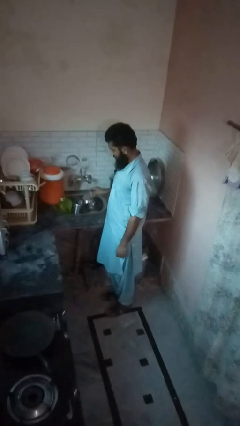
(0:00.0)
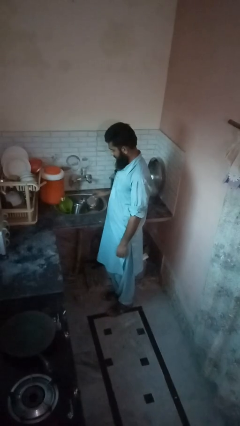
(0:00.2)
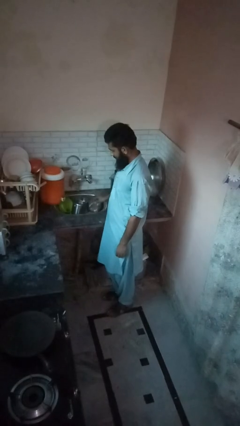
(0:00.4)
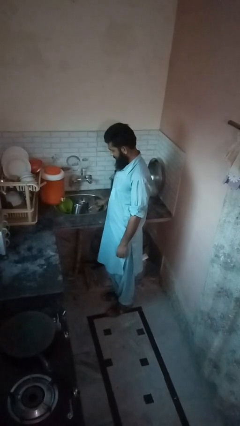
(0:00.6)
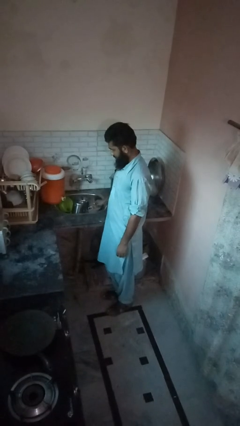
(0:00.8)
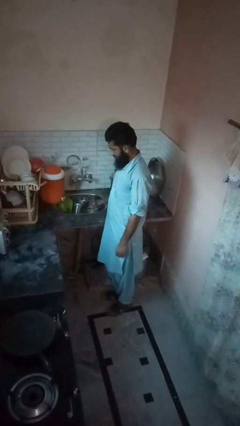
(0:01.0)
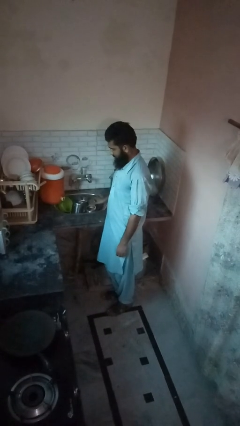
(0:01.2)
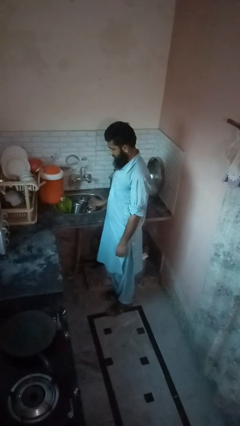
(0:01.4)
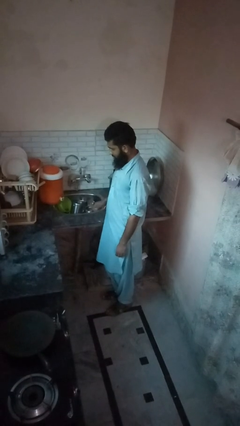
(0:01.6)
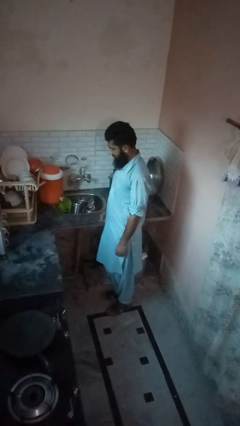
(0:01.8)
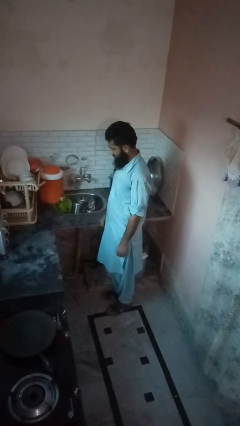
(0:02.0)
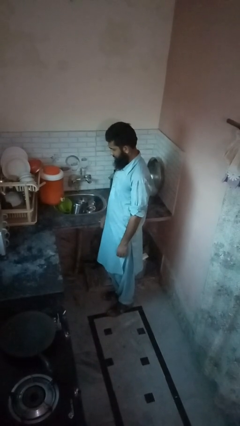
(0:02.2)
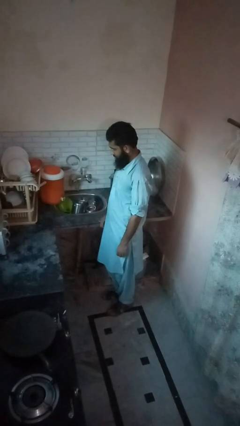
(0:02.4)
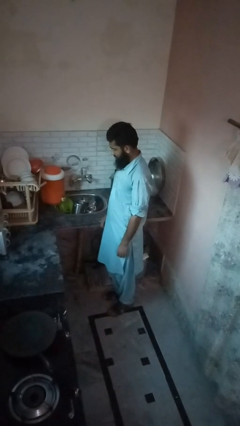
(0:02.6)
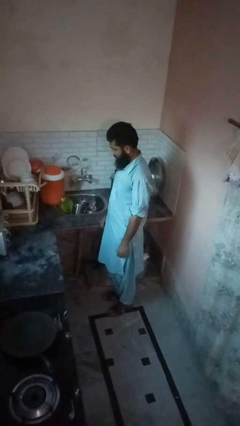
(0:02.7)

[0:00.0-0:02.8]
person puts down object on countertop

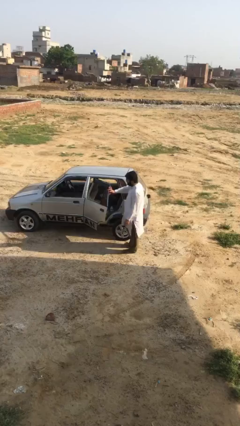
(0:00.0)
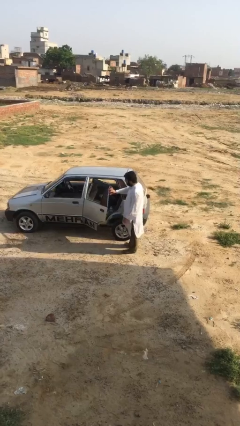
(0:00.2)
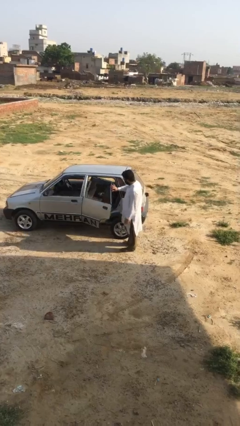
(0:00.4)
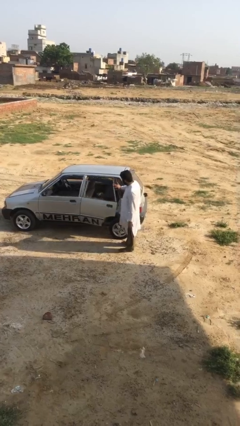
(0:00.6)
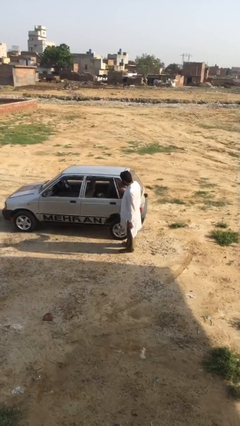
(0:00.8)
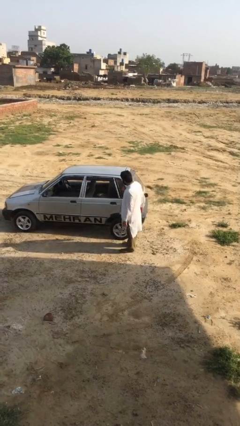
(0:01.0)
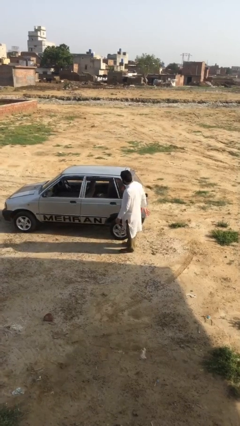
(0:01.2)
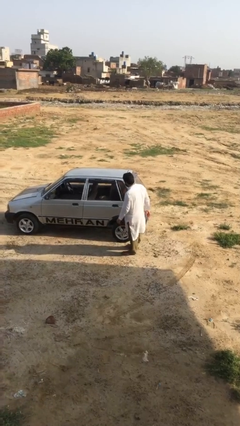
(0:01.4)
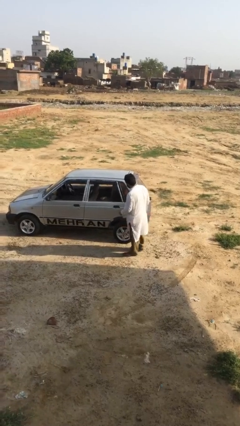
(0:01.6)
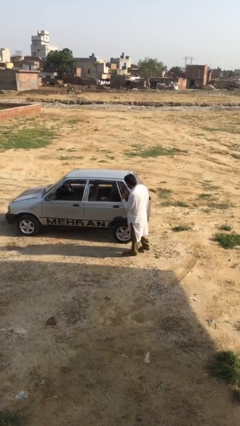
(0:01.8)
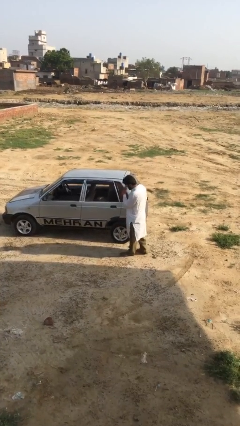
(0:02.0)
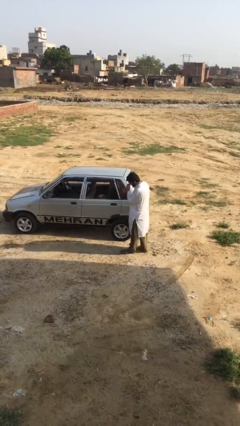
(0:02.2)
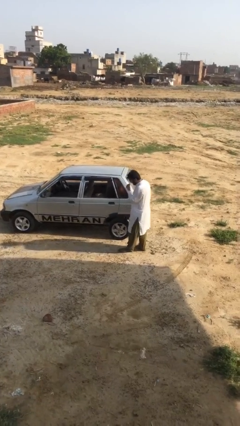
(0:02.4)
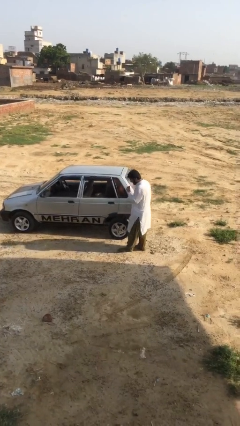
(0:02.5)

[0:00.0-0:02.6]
person closes car door

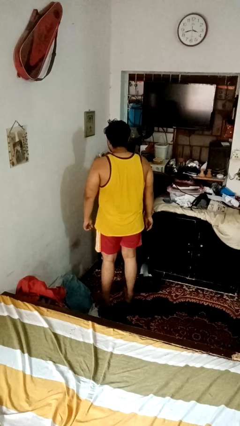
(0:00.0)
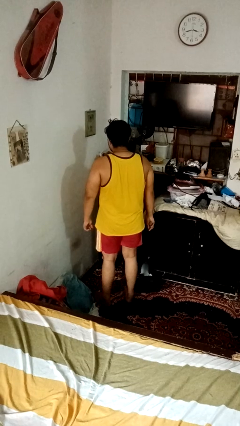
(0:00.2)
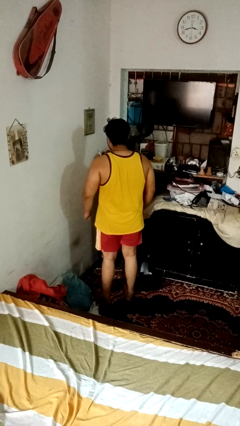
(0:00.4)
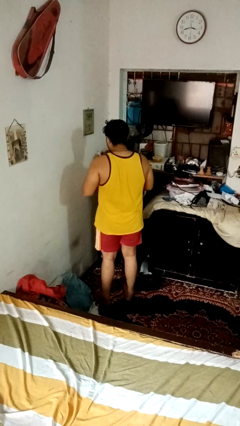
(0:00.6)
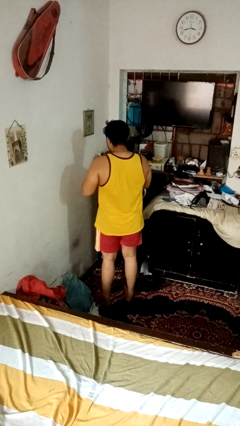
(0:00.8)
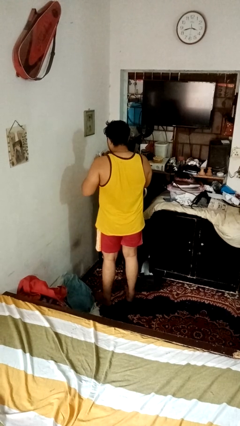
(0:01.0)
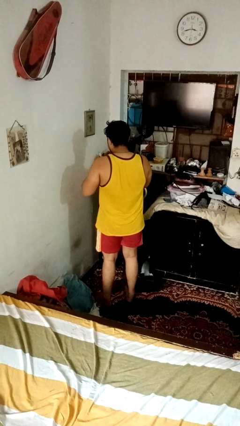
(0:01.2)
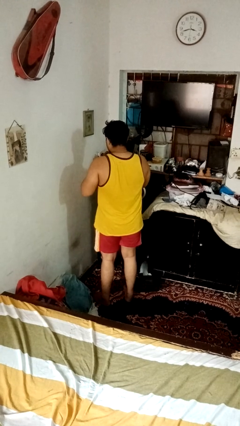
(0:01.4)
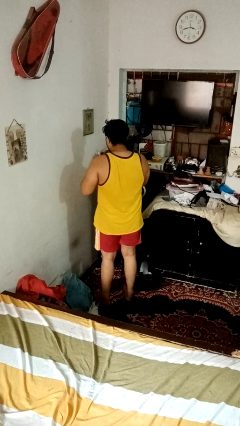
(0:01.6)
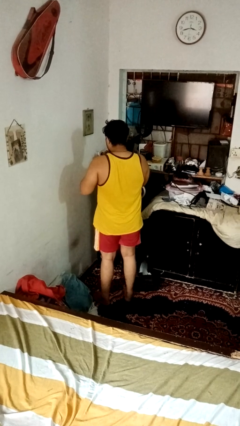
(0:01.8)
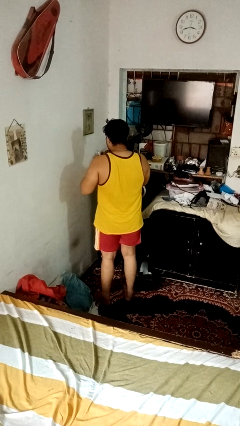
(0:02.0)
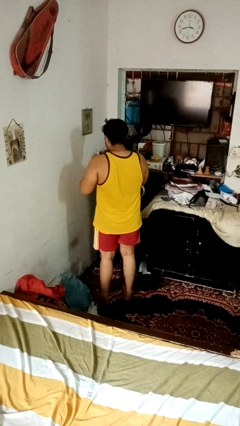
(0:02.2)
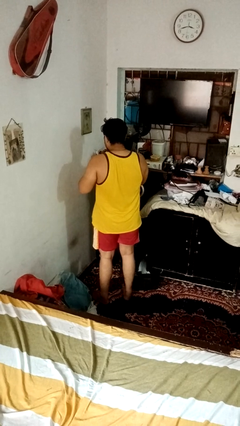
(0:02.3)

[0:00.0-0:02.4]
person files fingernails

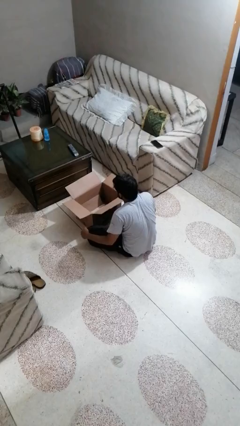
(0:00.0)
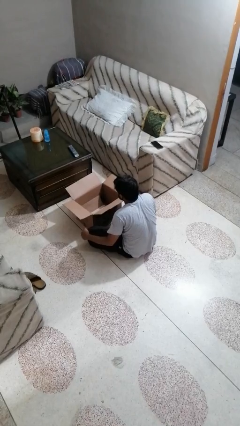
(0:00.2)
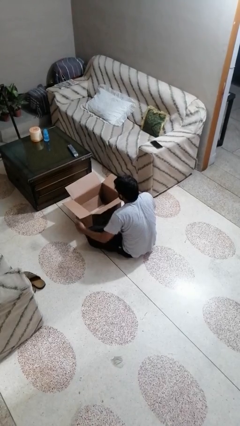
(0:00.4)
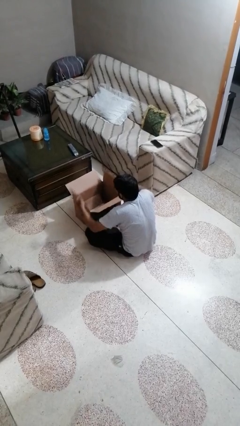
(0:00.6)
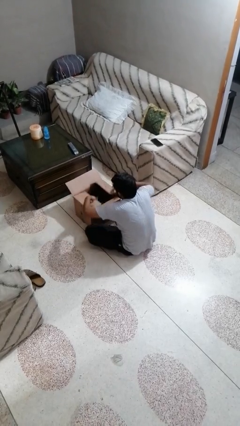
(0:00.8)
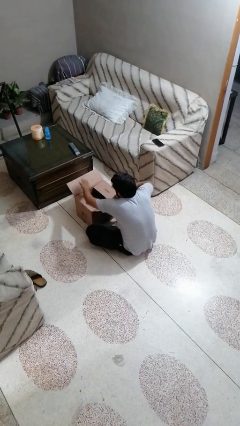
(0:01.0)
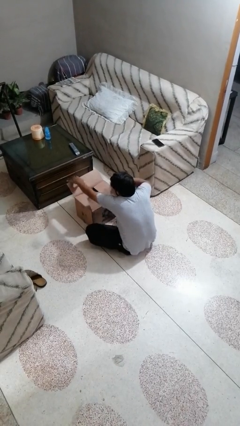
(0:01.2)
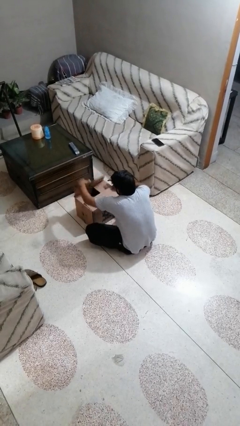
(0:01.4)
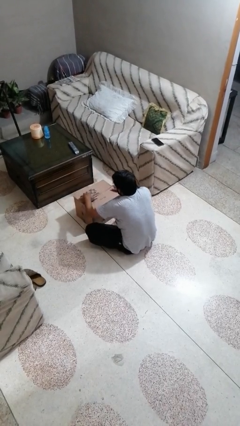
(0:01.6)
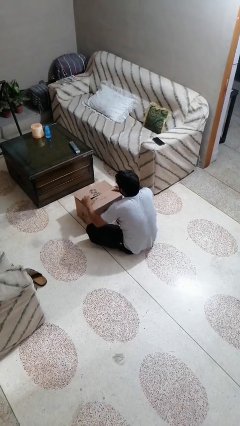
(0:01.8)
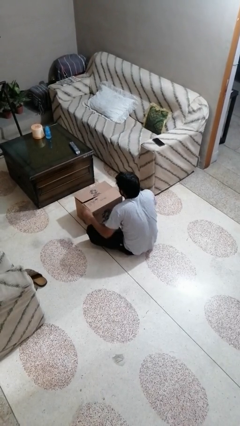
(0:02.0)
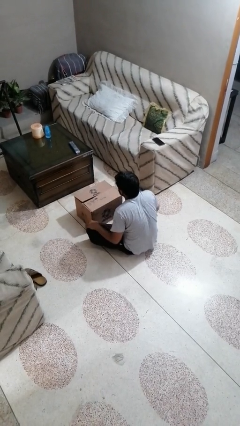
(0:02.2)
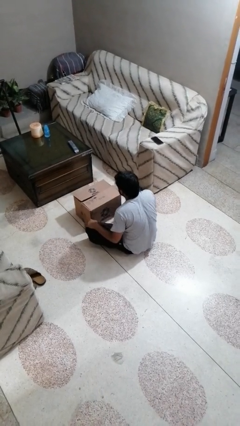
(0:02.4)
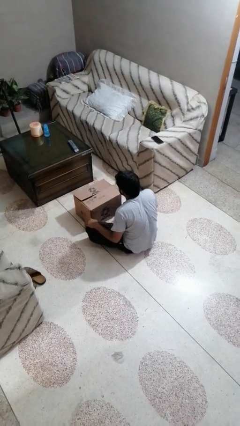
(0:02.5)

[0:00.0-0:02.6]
person closes box

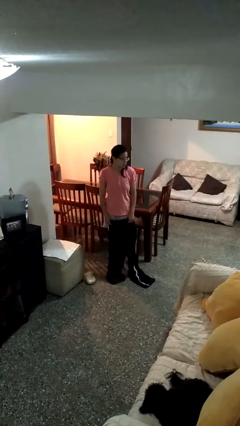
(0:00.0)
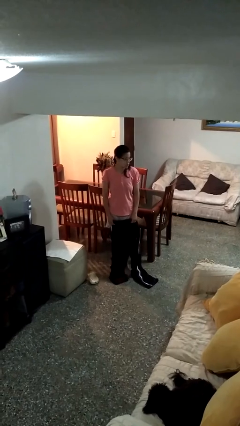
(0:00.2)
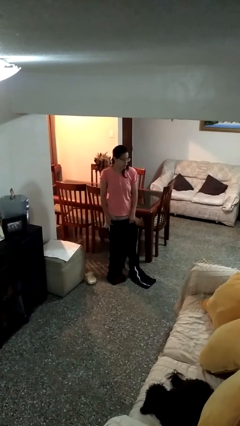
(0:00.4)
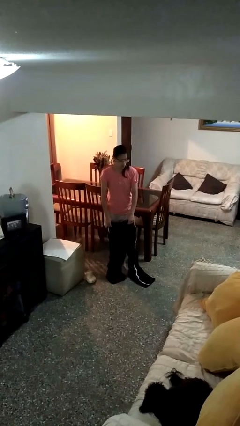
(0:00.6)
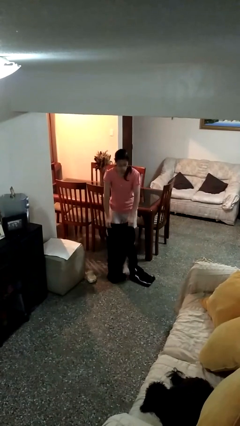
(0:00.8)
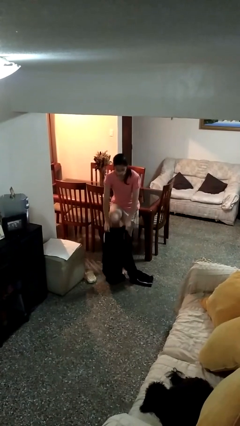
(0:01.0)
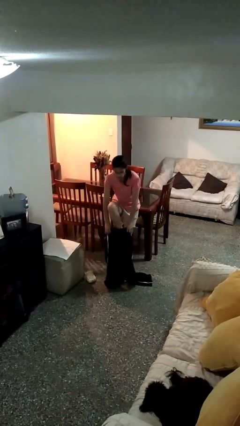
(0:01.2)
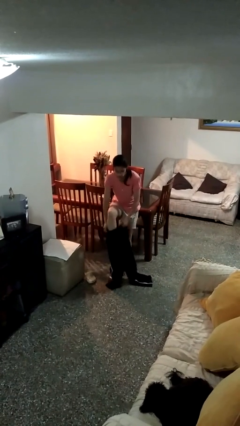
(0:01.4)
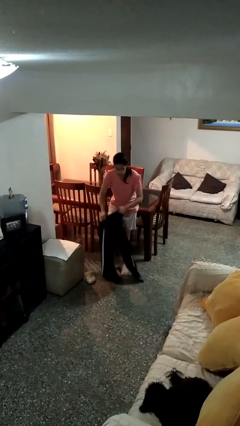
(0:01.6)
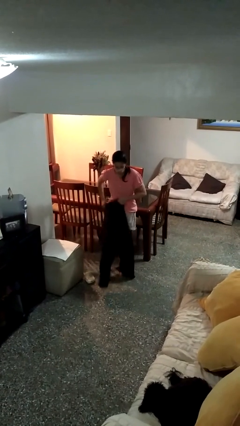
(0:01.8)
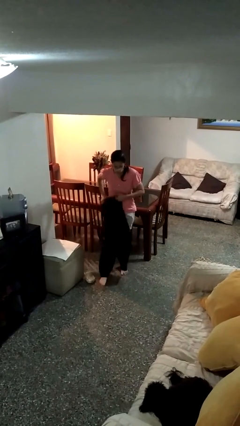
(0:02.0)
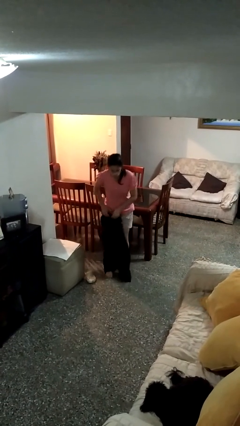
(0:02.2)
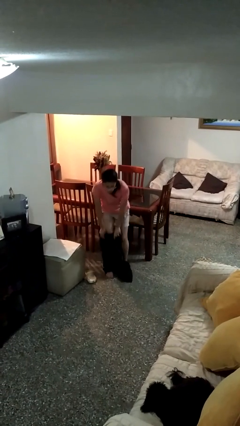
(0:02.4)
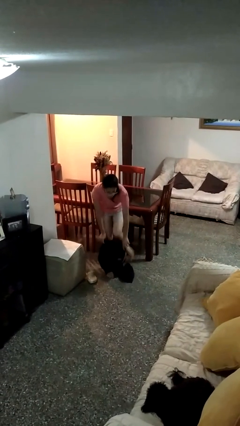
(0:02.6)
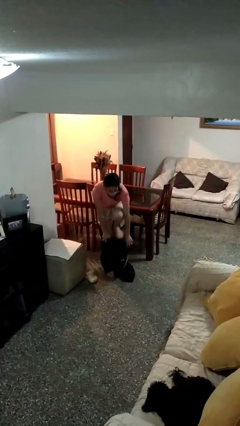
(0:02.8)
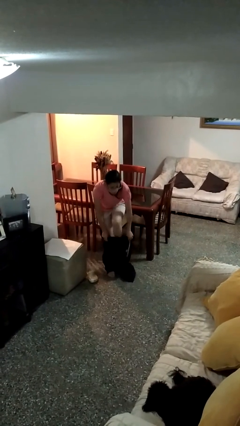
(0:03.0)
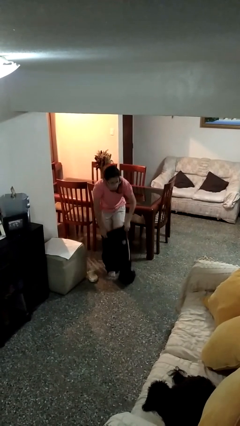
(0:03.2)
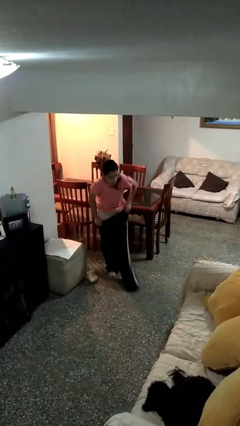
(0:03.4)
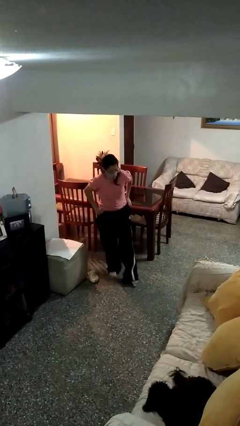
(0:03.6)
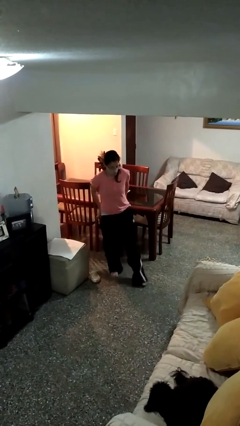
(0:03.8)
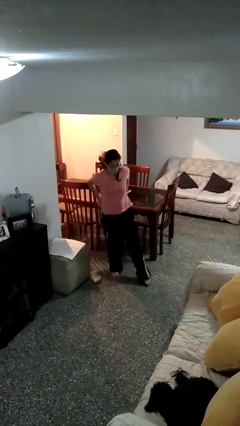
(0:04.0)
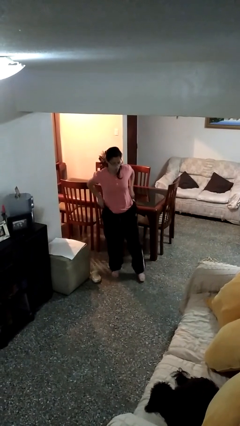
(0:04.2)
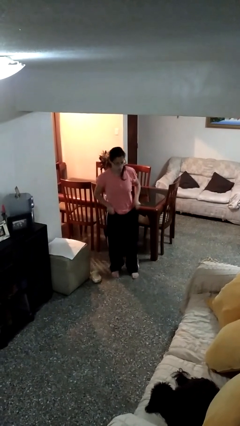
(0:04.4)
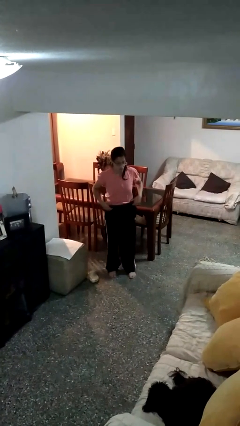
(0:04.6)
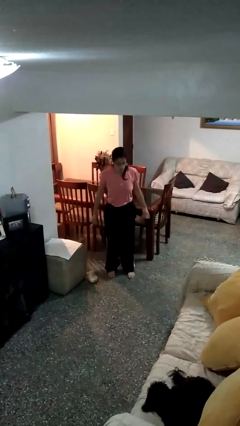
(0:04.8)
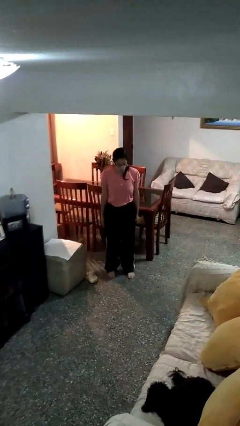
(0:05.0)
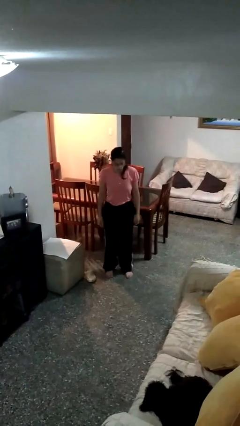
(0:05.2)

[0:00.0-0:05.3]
person takes off pants

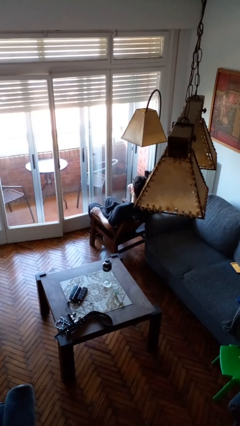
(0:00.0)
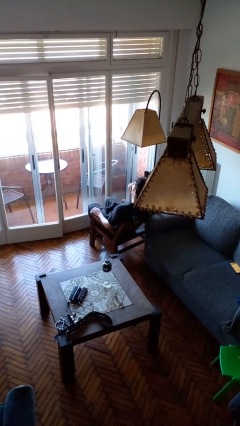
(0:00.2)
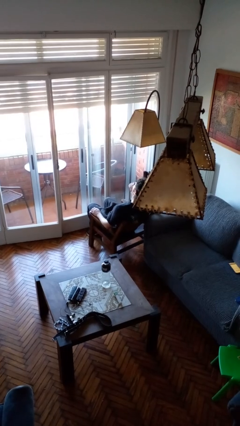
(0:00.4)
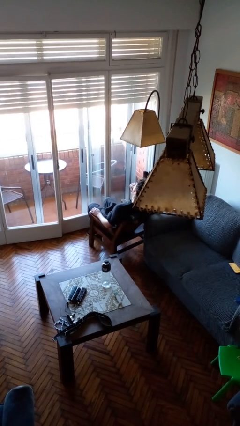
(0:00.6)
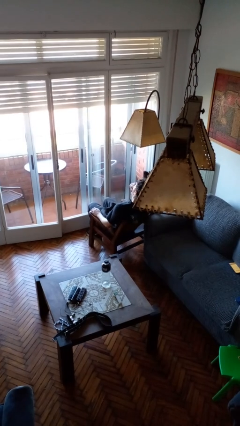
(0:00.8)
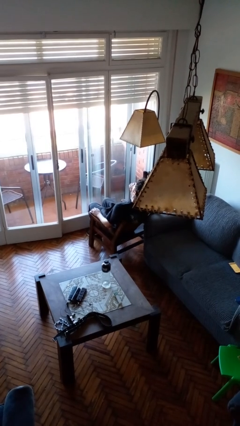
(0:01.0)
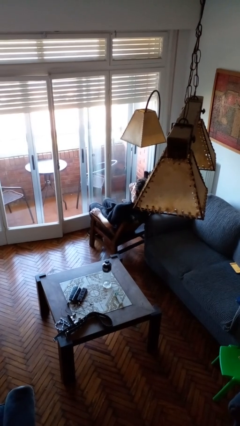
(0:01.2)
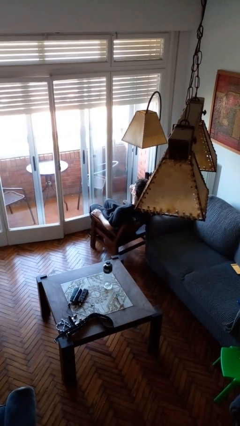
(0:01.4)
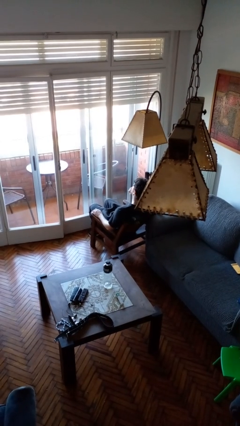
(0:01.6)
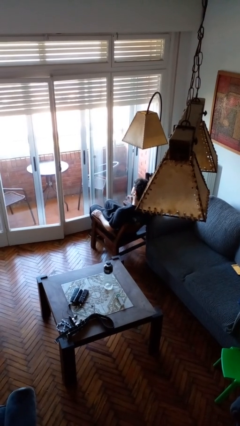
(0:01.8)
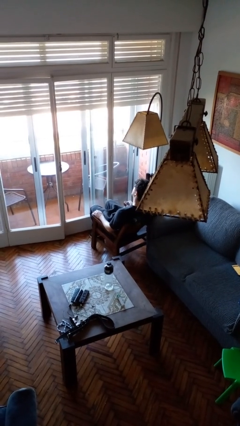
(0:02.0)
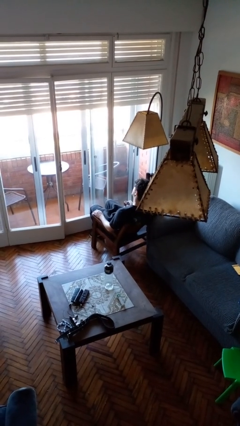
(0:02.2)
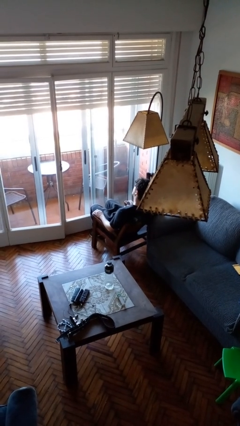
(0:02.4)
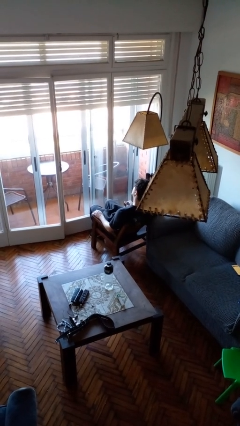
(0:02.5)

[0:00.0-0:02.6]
person yawns
